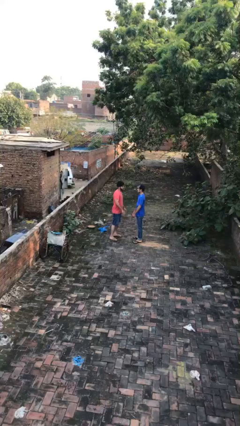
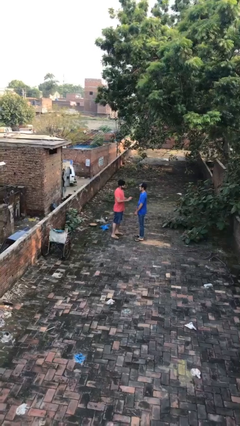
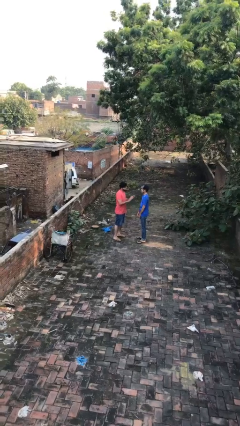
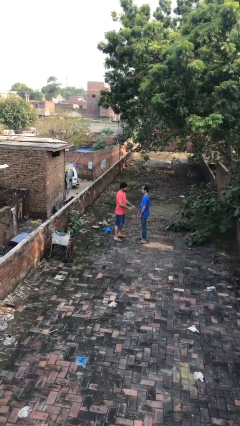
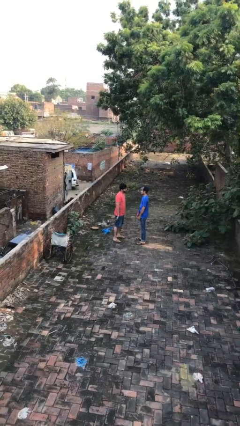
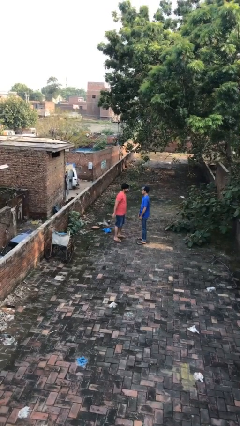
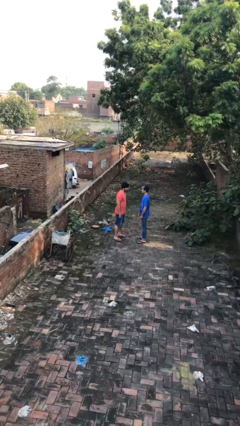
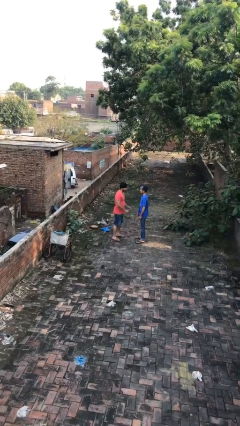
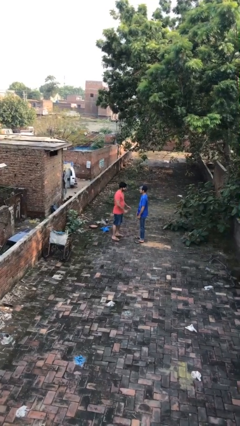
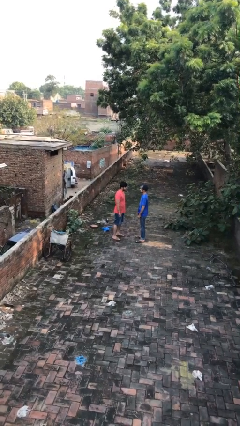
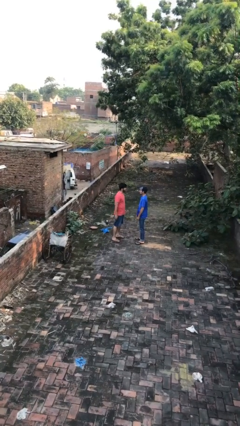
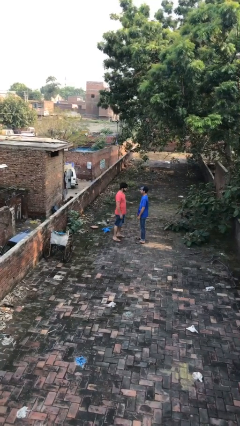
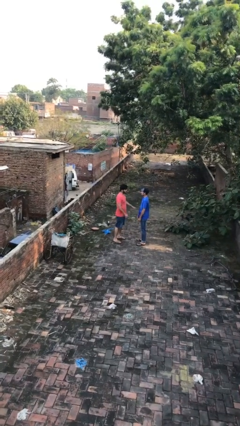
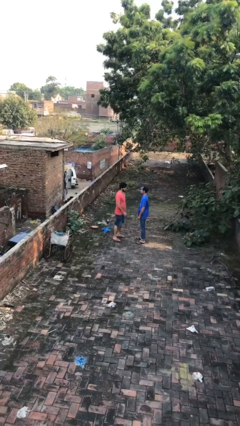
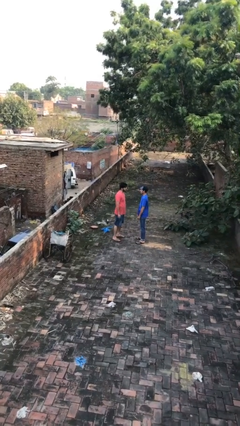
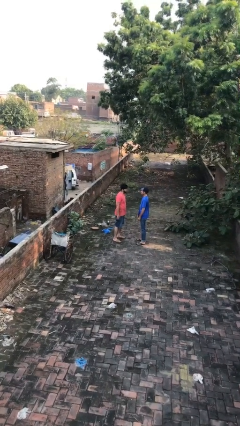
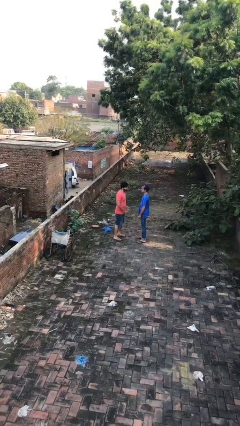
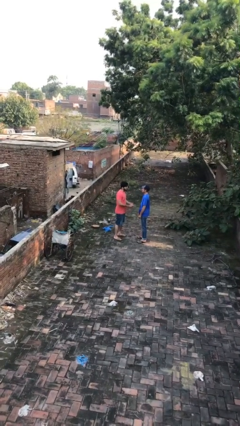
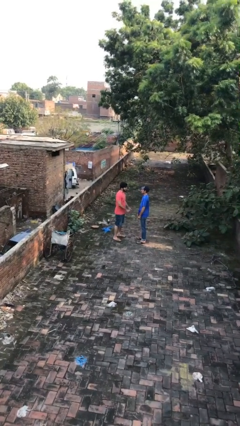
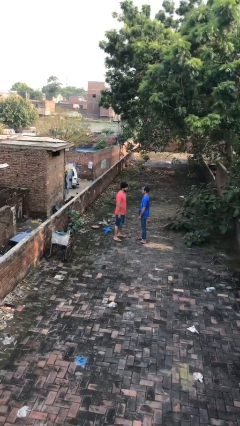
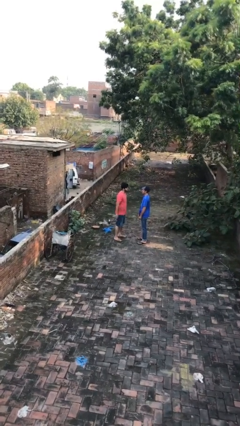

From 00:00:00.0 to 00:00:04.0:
person talks to person

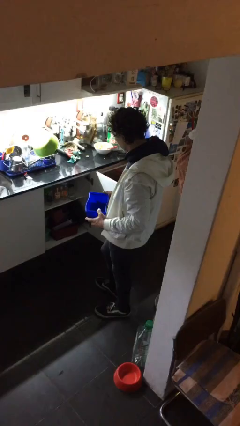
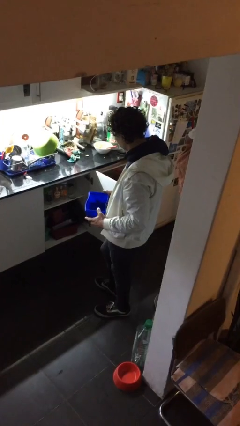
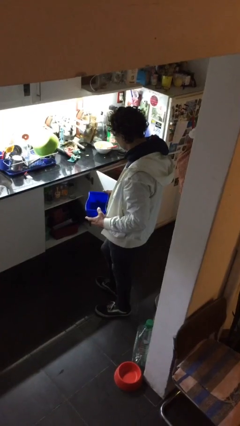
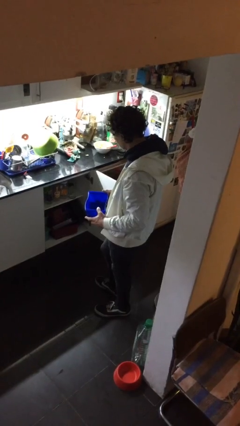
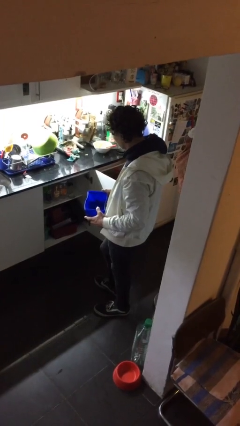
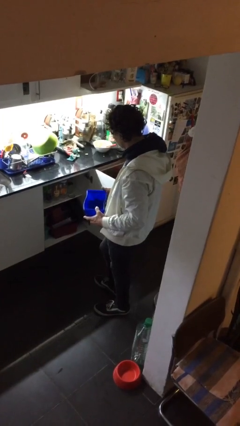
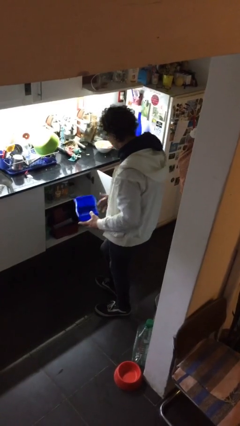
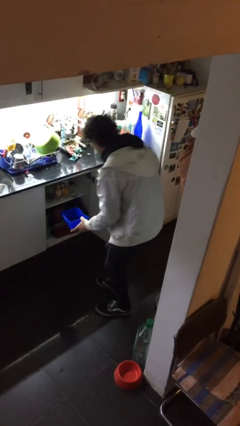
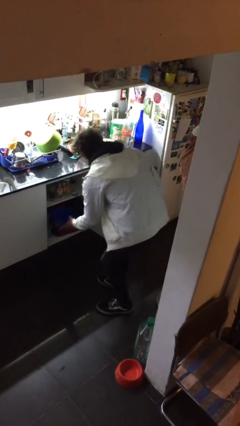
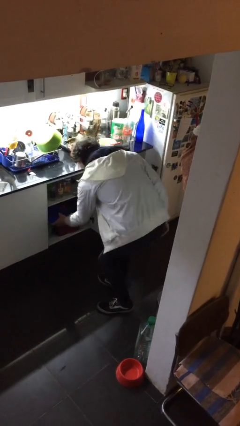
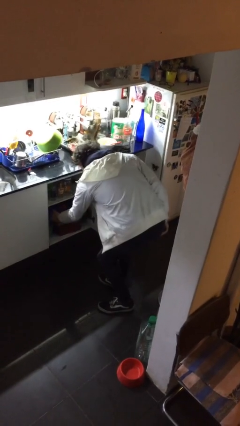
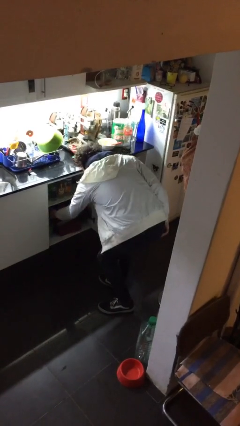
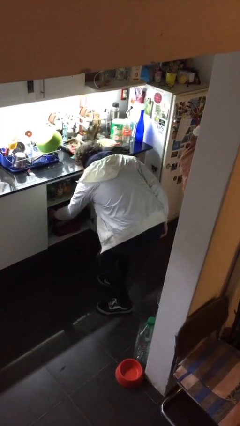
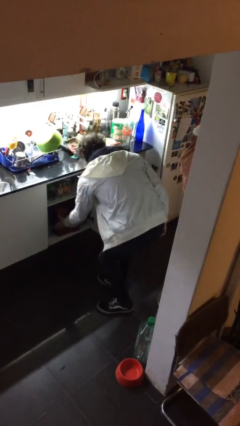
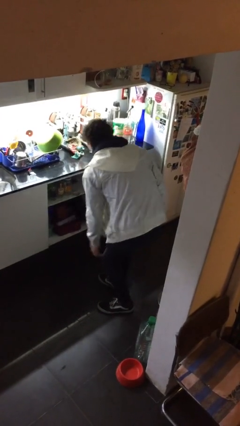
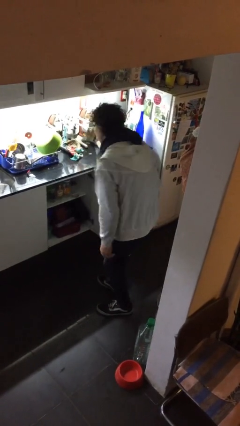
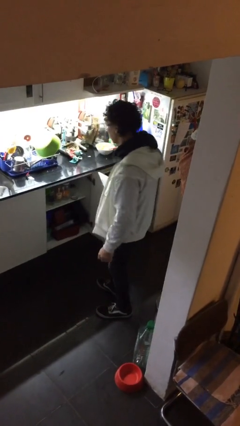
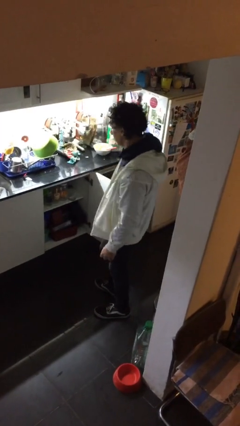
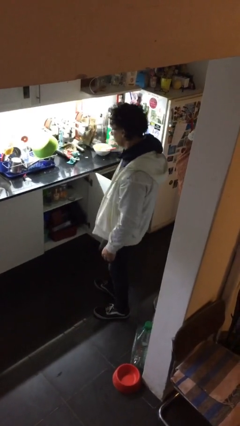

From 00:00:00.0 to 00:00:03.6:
person puts down object into cabinet

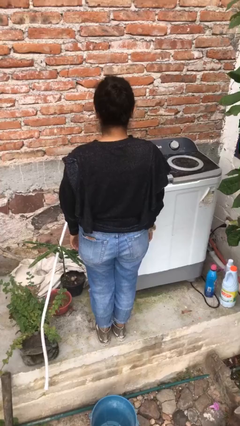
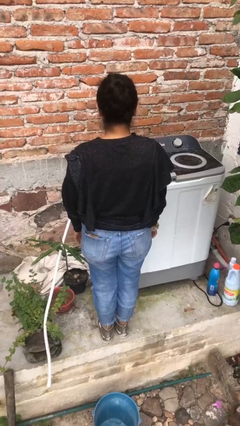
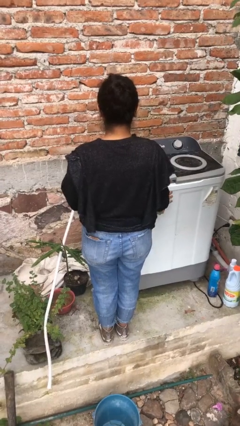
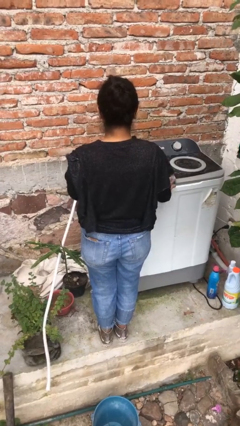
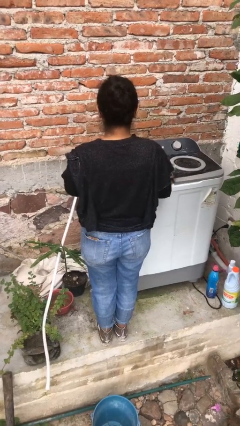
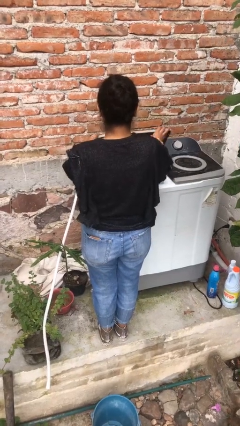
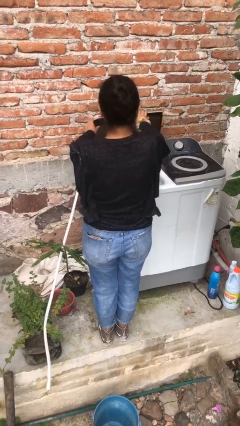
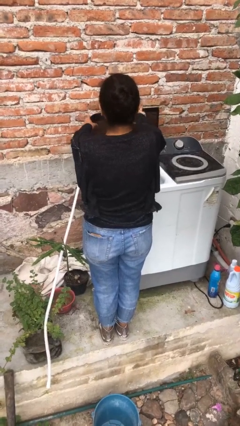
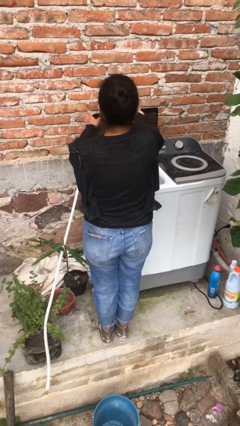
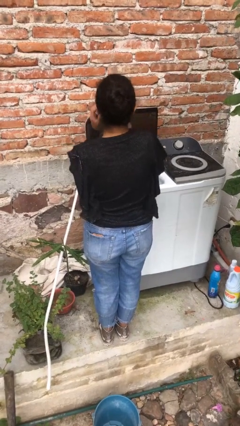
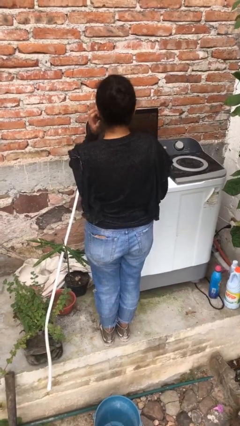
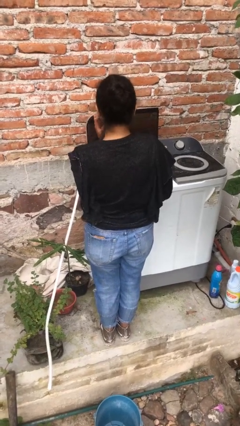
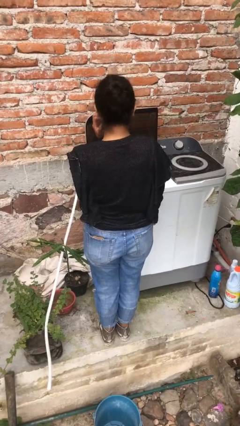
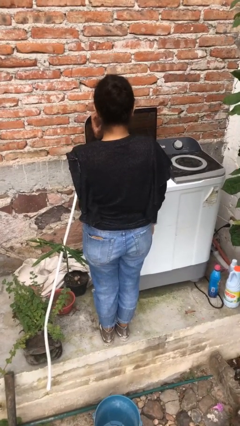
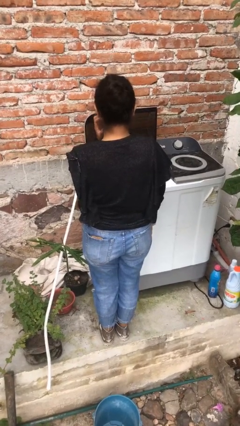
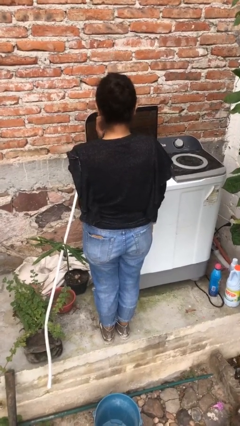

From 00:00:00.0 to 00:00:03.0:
person opens clothes washer

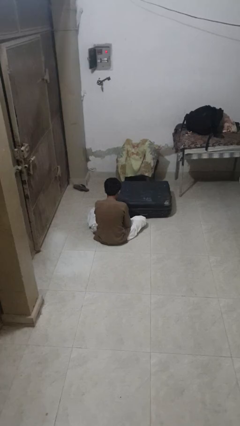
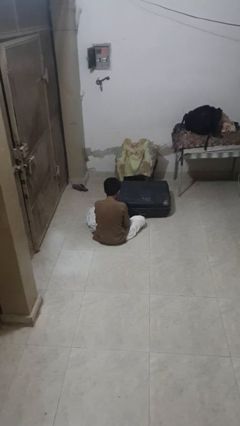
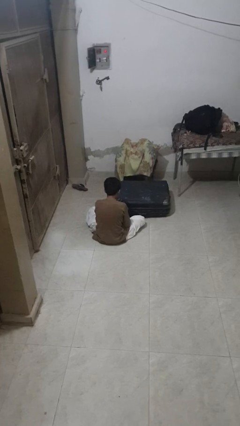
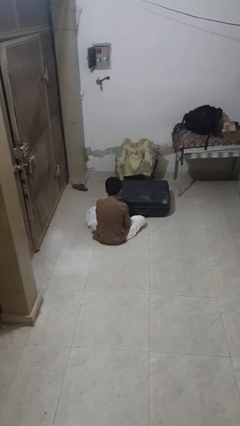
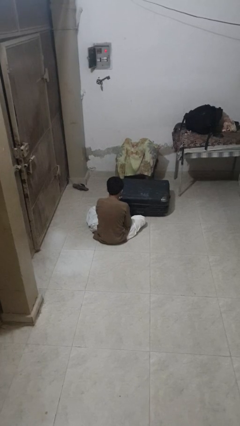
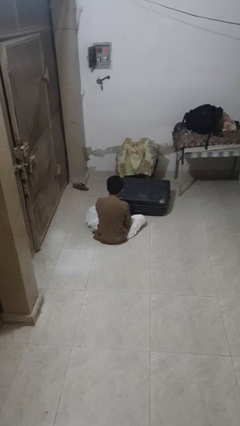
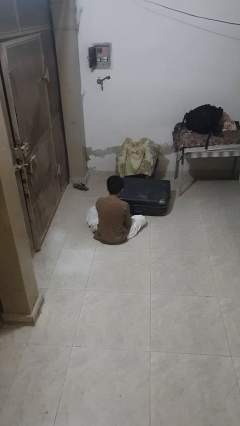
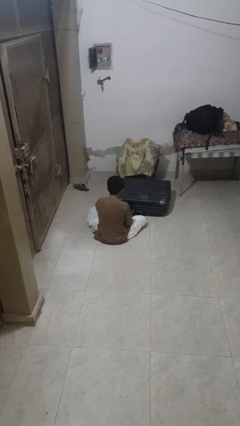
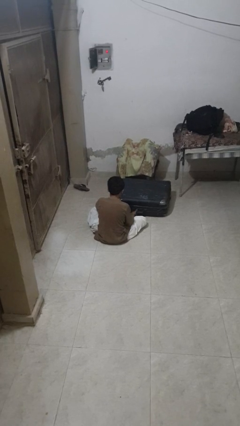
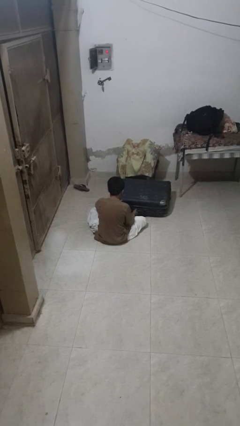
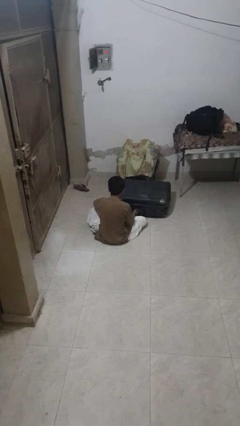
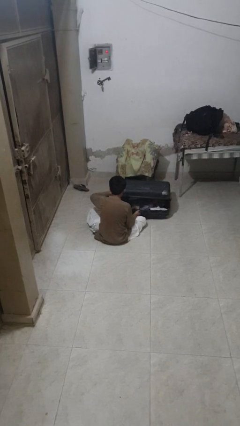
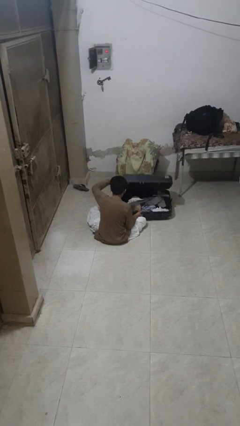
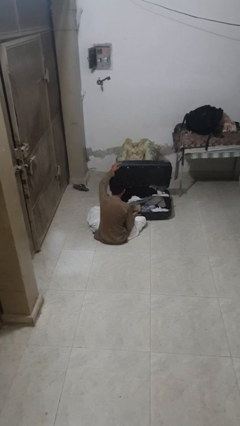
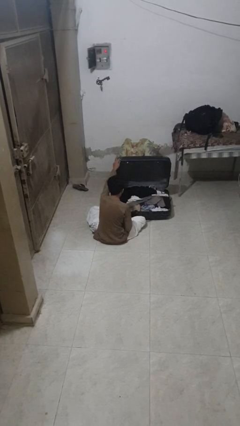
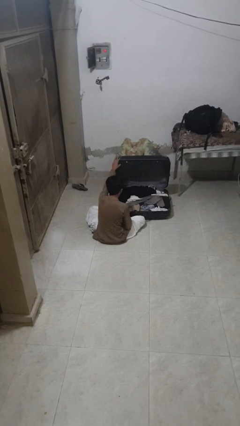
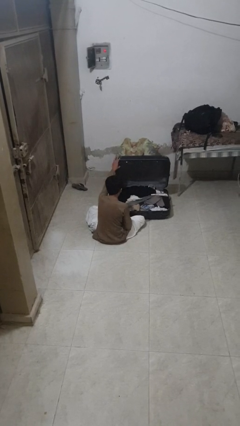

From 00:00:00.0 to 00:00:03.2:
person opens suitcase

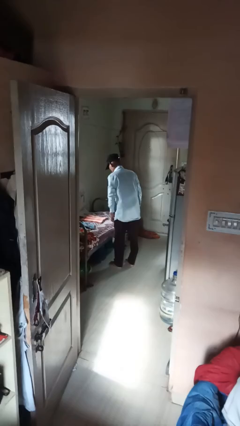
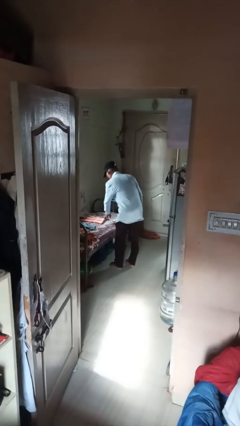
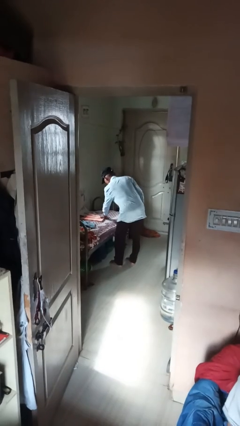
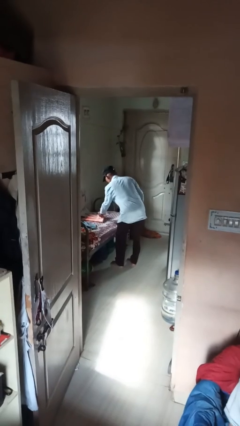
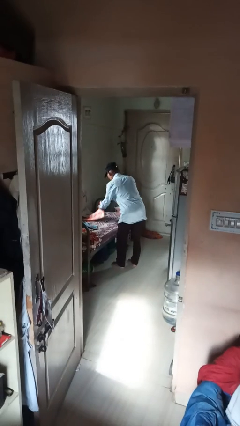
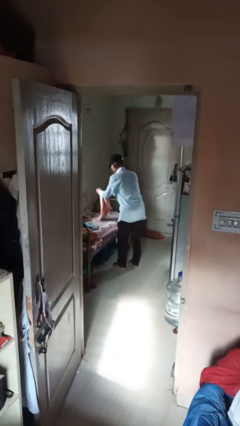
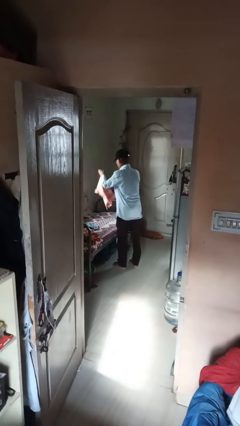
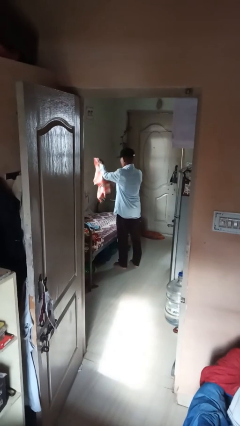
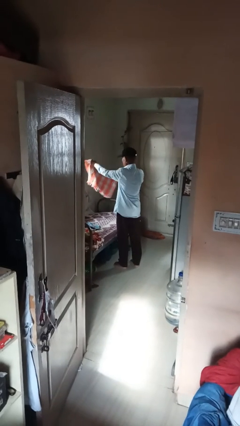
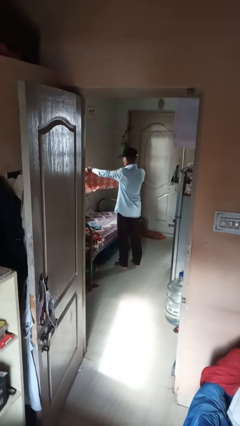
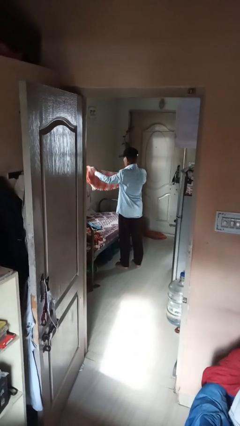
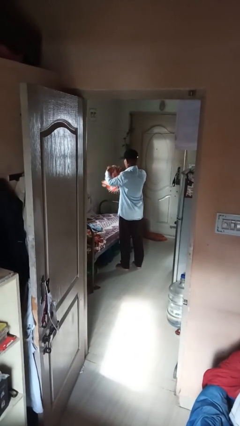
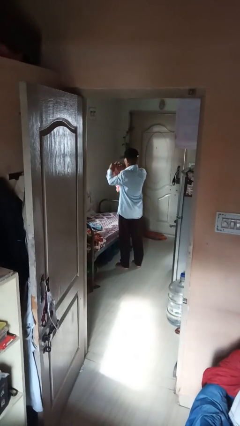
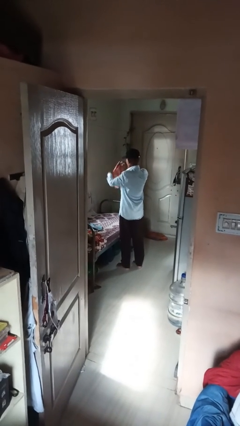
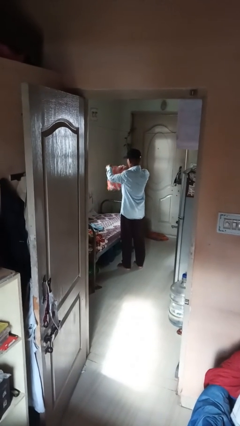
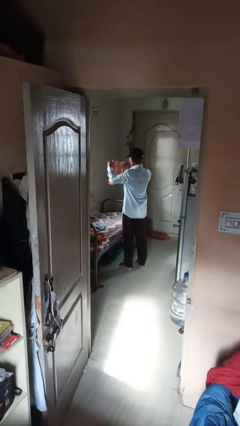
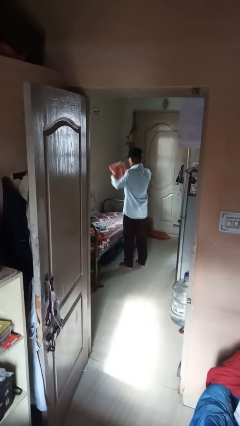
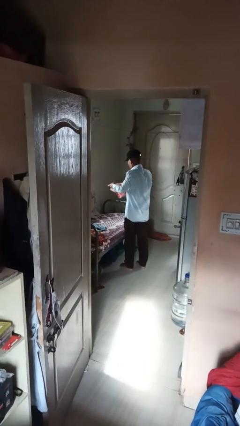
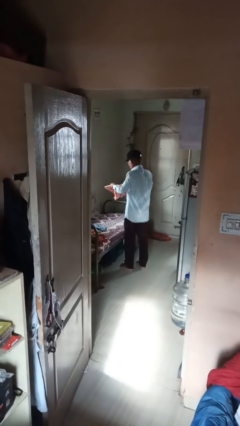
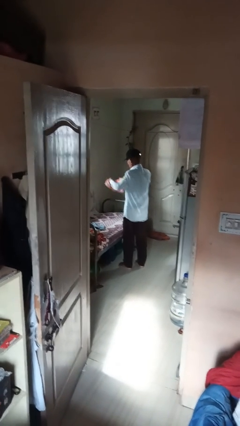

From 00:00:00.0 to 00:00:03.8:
person folds towel
